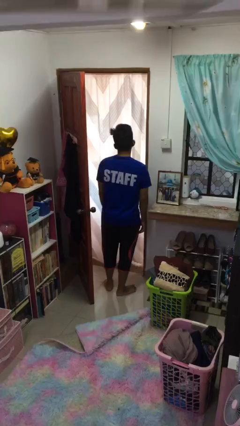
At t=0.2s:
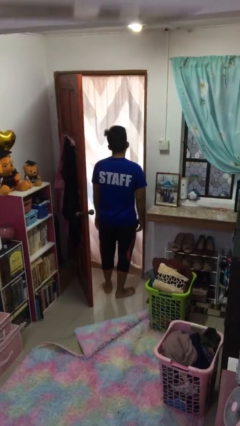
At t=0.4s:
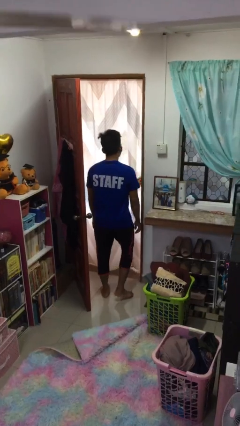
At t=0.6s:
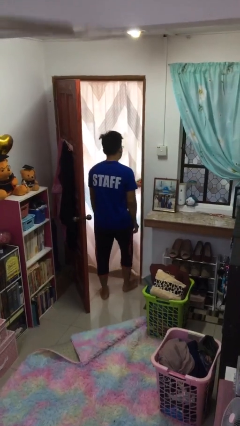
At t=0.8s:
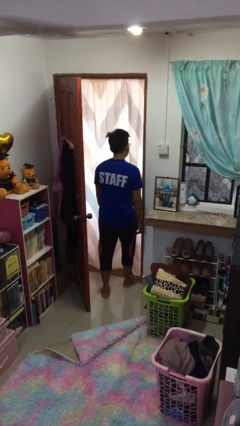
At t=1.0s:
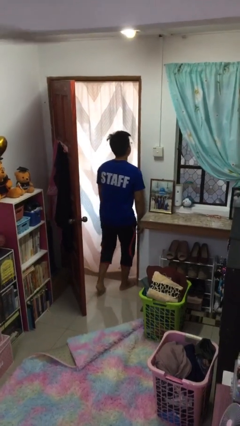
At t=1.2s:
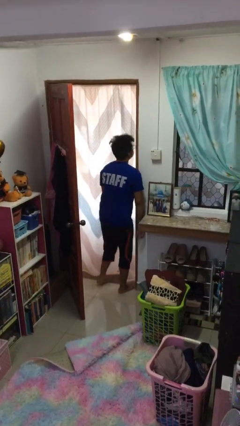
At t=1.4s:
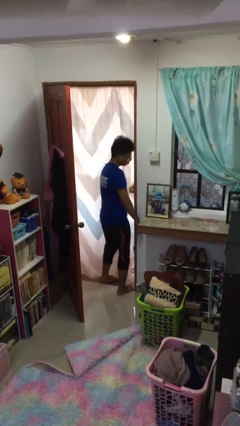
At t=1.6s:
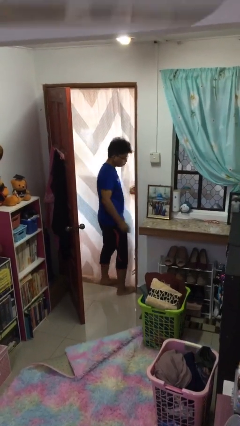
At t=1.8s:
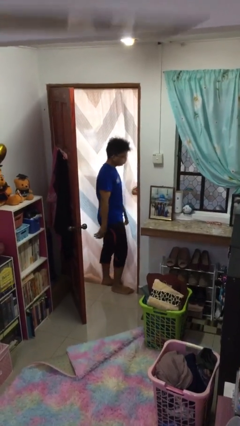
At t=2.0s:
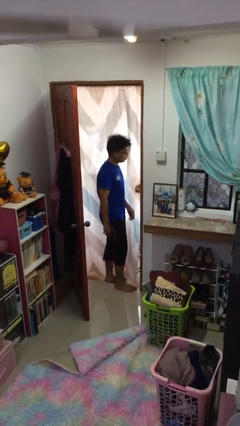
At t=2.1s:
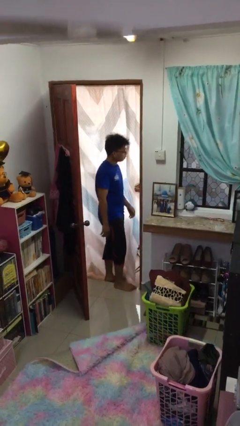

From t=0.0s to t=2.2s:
person bumps into wall

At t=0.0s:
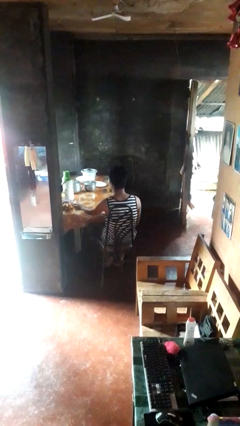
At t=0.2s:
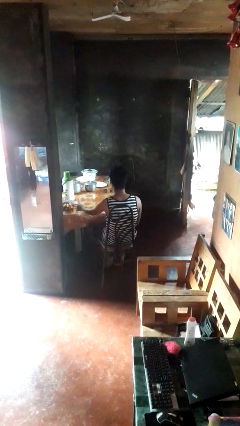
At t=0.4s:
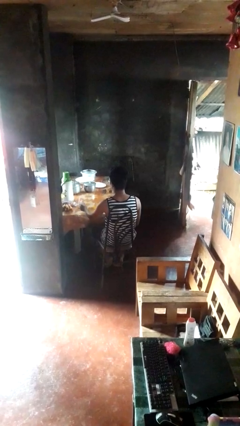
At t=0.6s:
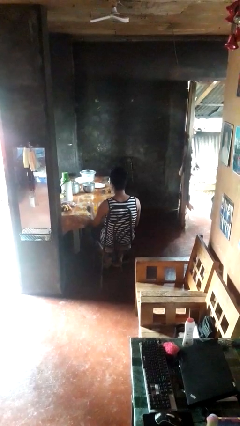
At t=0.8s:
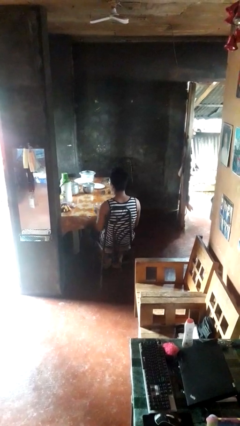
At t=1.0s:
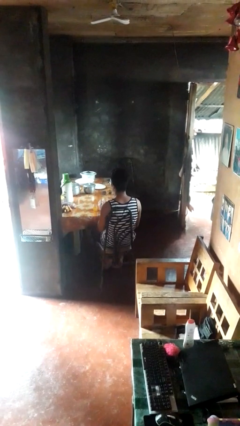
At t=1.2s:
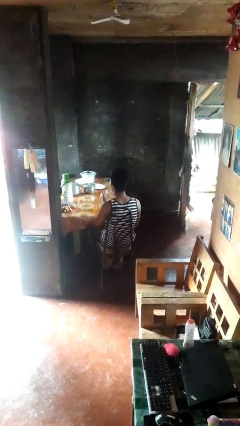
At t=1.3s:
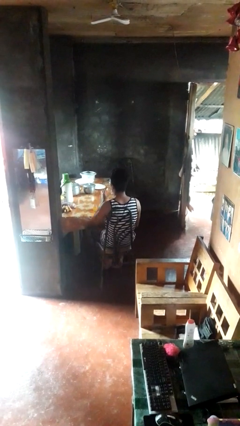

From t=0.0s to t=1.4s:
person picks up object from table

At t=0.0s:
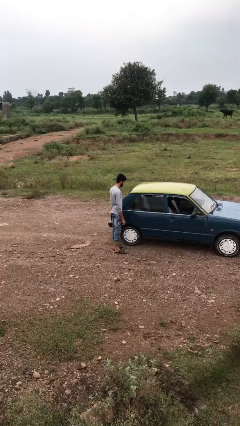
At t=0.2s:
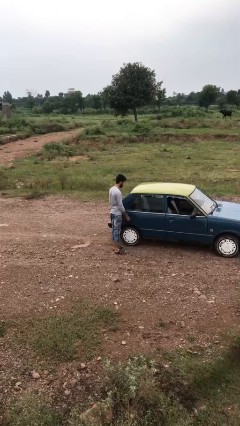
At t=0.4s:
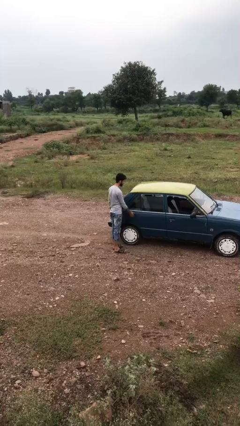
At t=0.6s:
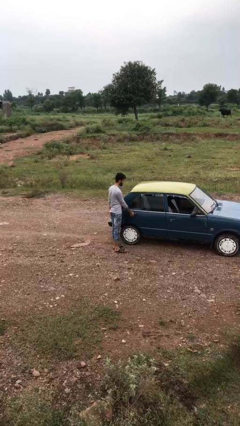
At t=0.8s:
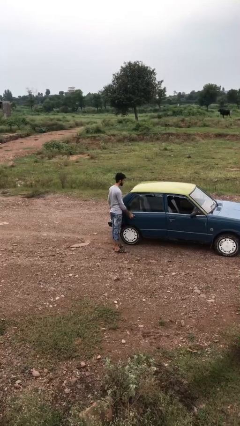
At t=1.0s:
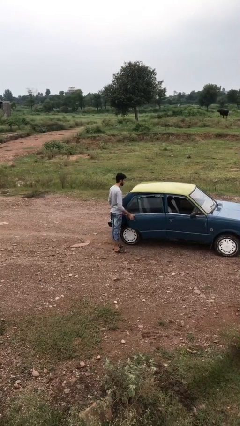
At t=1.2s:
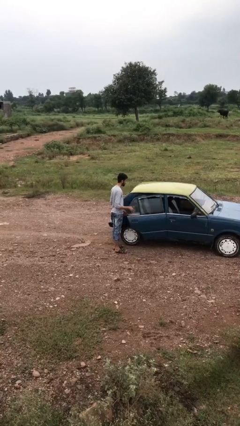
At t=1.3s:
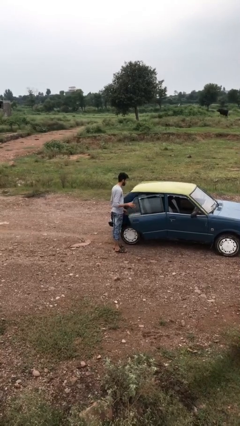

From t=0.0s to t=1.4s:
person opens car door

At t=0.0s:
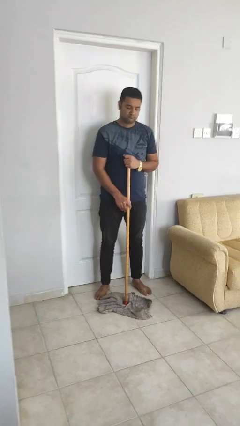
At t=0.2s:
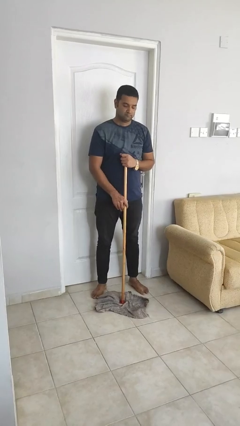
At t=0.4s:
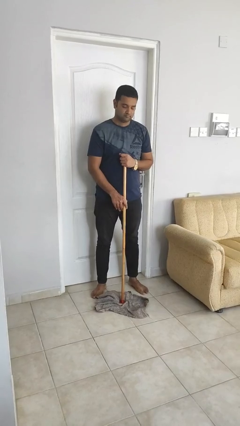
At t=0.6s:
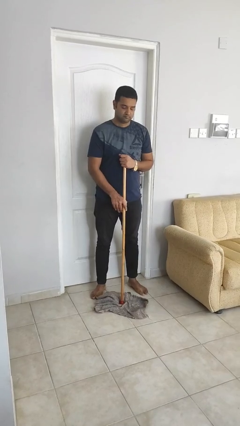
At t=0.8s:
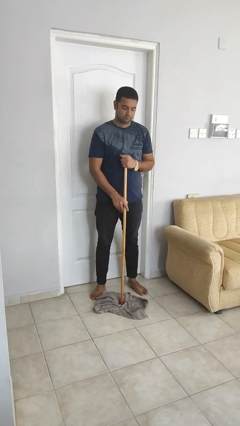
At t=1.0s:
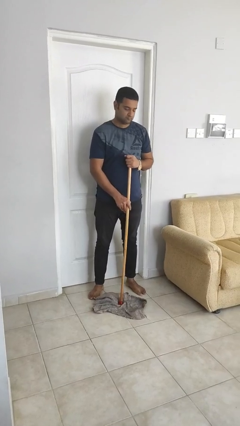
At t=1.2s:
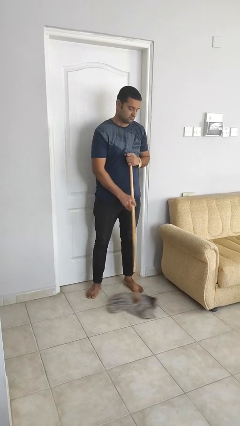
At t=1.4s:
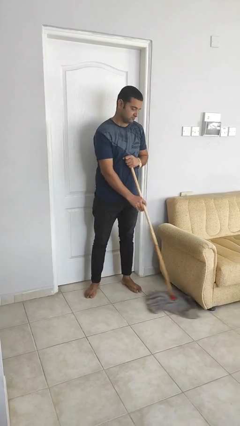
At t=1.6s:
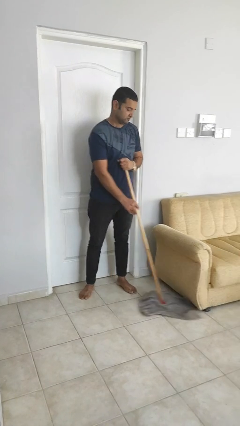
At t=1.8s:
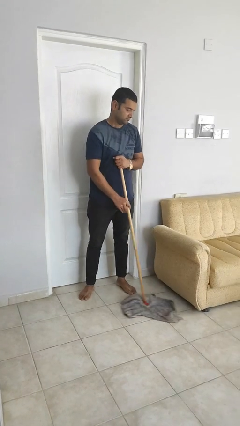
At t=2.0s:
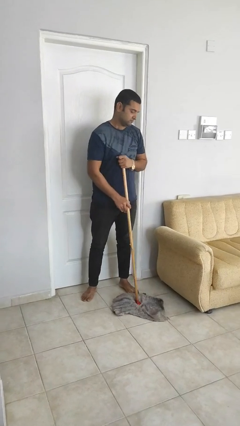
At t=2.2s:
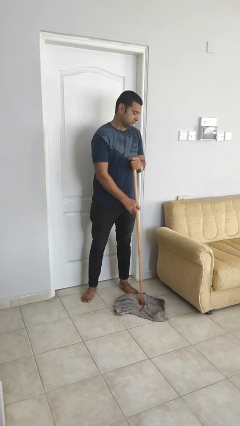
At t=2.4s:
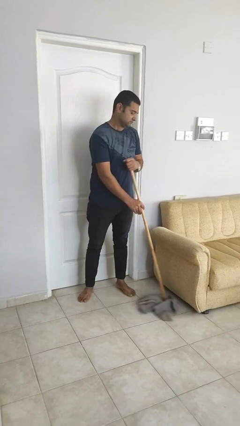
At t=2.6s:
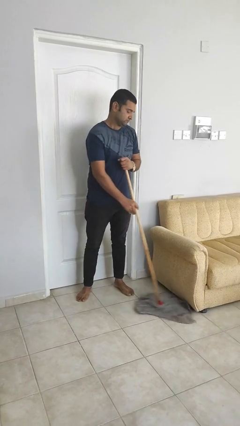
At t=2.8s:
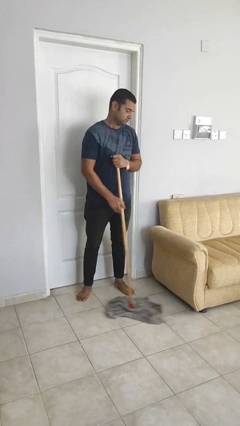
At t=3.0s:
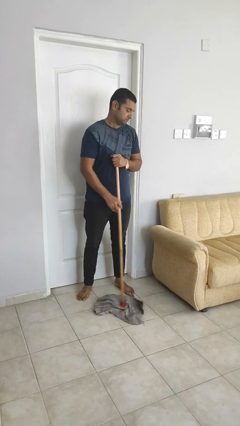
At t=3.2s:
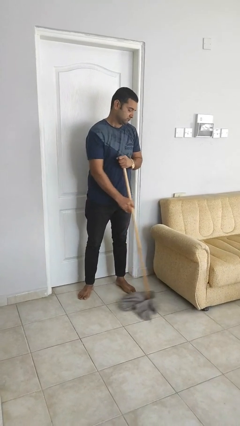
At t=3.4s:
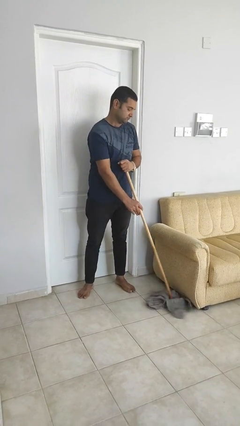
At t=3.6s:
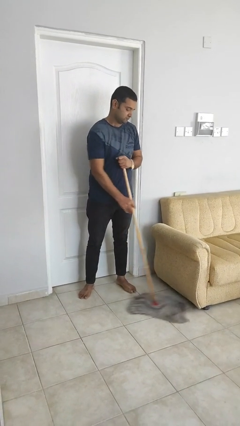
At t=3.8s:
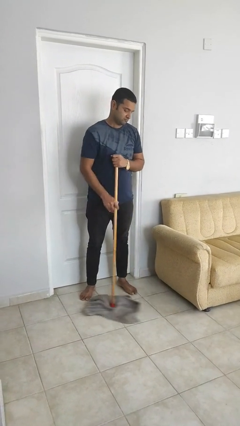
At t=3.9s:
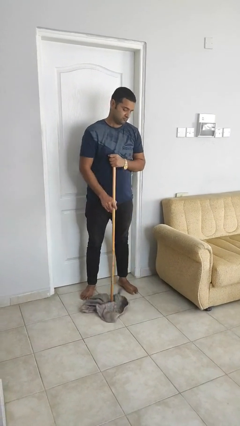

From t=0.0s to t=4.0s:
person mops

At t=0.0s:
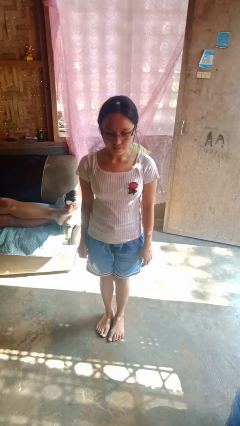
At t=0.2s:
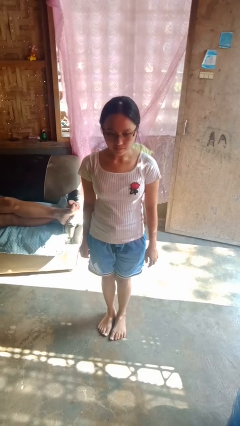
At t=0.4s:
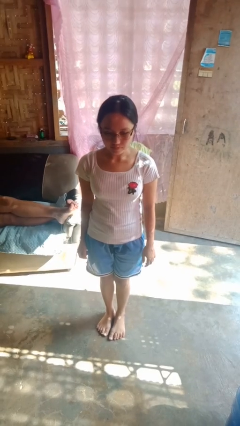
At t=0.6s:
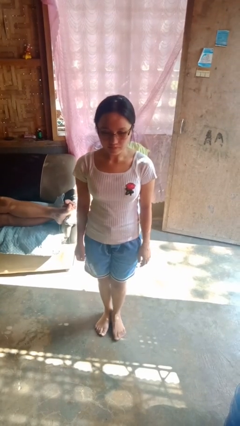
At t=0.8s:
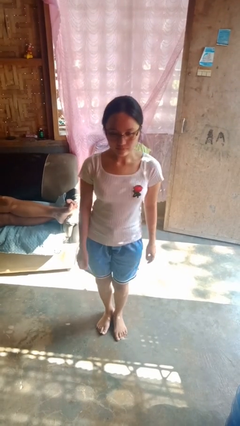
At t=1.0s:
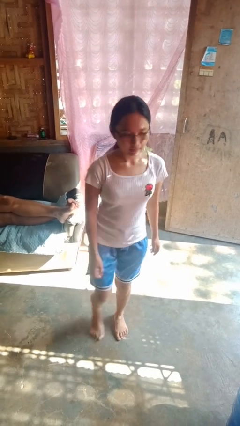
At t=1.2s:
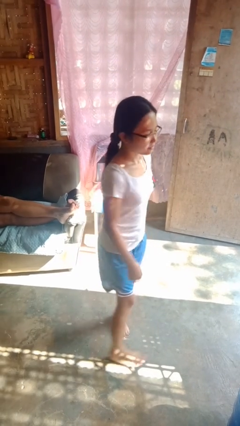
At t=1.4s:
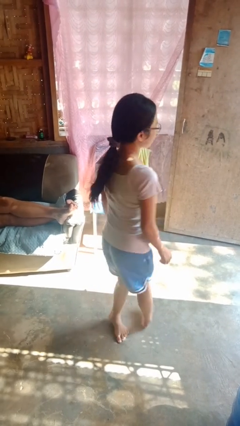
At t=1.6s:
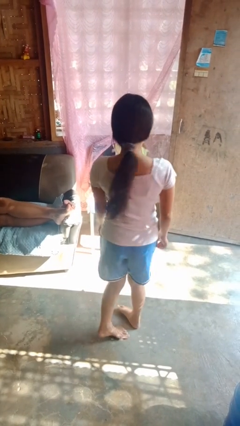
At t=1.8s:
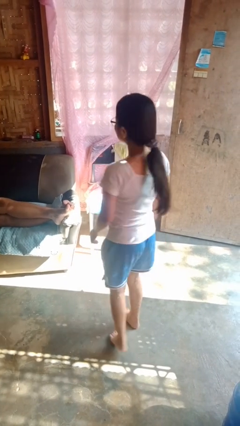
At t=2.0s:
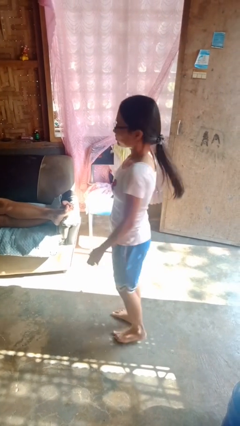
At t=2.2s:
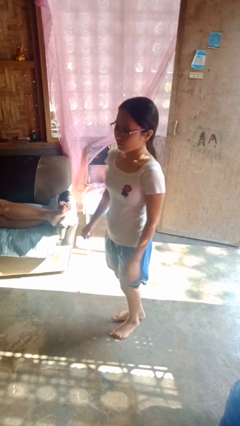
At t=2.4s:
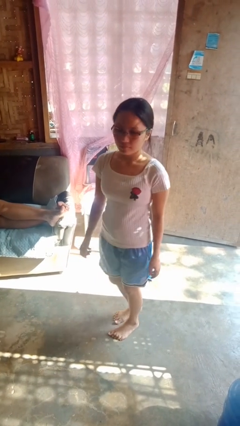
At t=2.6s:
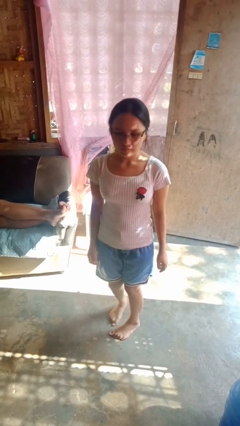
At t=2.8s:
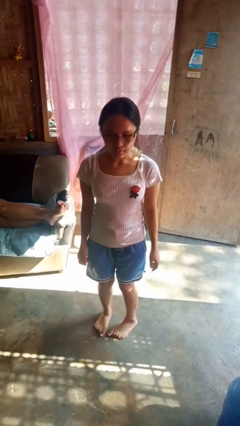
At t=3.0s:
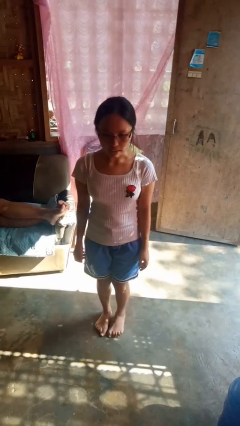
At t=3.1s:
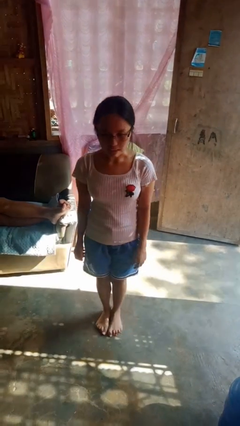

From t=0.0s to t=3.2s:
person twirls

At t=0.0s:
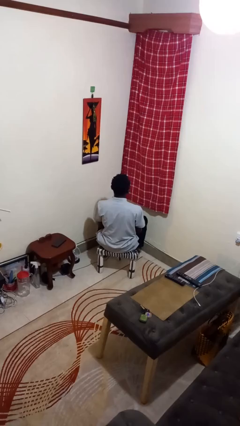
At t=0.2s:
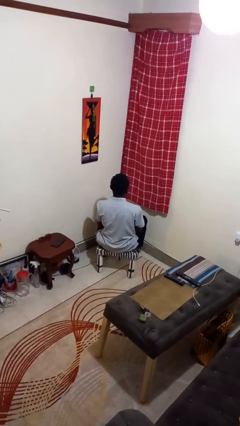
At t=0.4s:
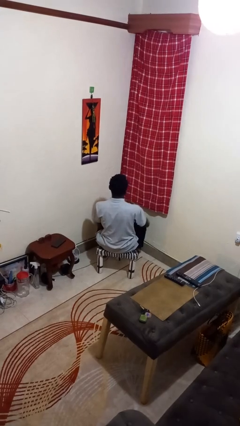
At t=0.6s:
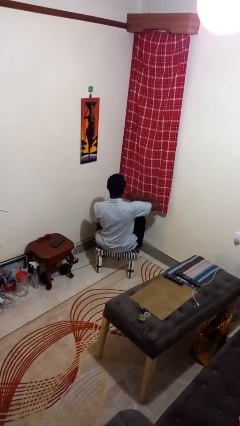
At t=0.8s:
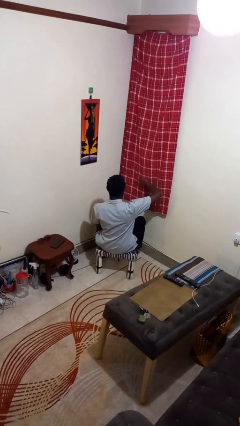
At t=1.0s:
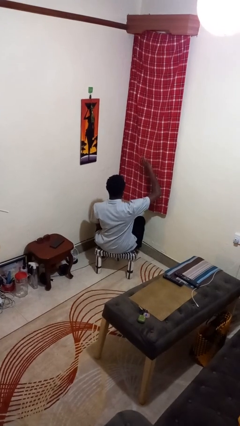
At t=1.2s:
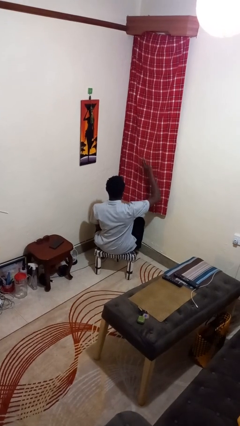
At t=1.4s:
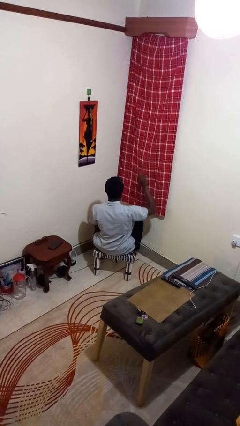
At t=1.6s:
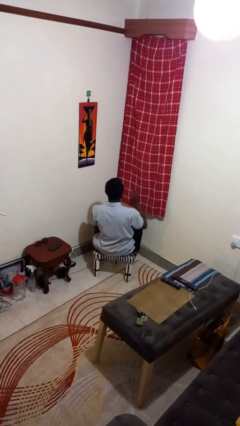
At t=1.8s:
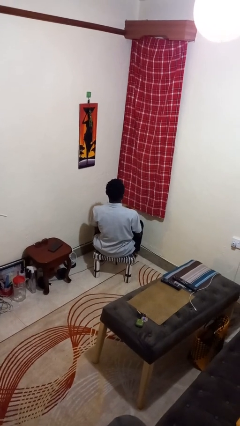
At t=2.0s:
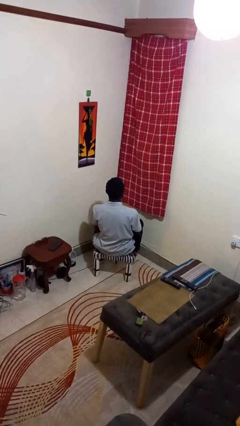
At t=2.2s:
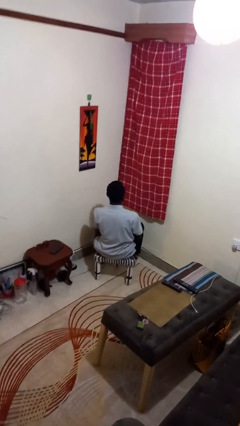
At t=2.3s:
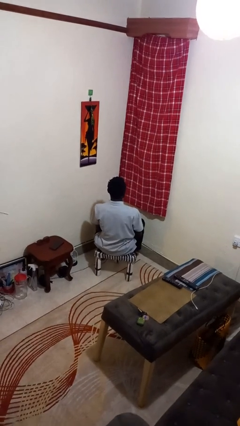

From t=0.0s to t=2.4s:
person gestures swipe up

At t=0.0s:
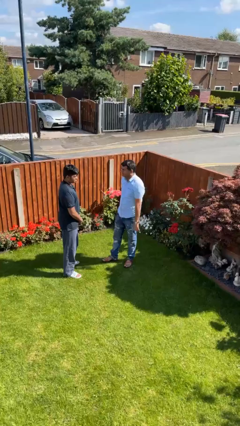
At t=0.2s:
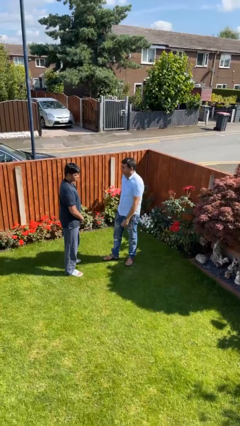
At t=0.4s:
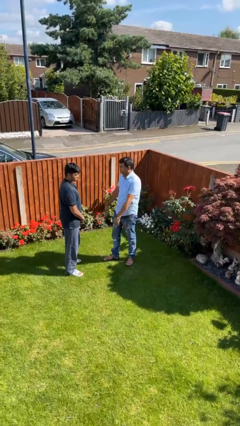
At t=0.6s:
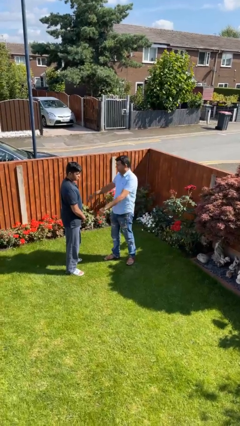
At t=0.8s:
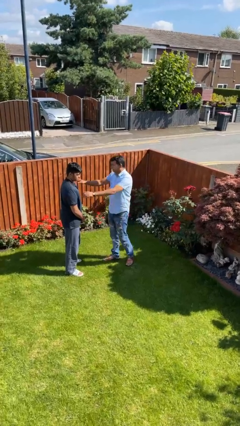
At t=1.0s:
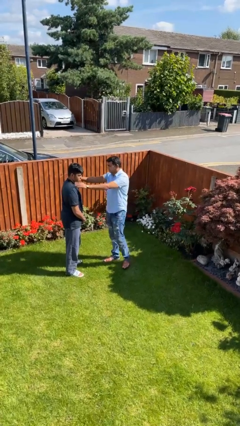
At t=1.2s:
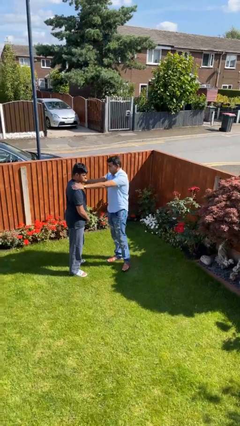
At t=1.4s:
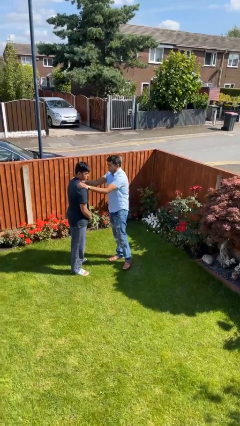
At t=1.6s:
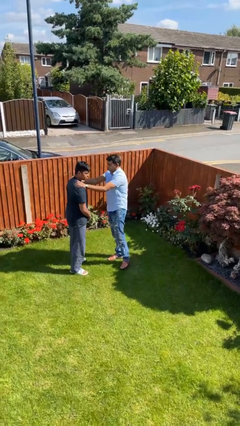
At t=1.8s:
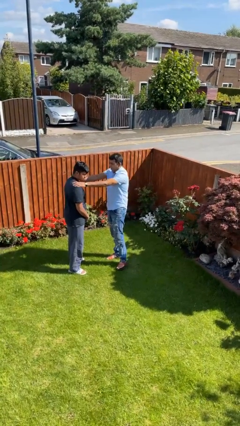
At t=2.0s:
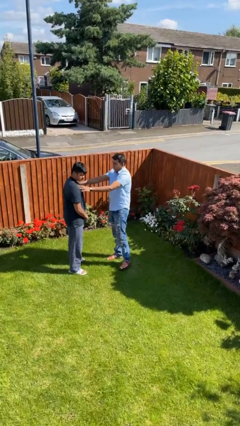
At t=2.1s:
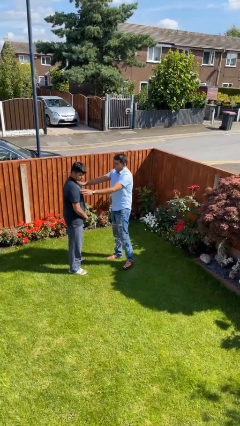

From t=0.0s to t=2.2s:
person pounds shoulders of person

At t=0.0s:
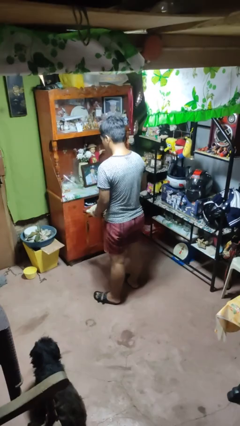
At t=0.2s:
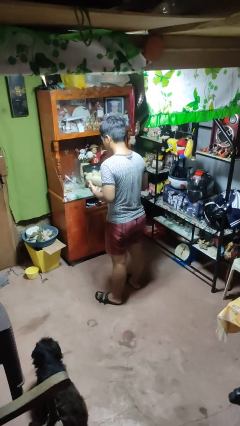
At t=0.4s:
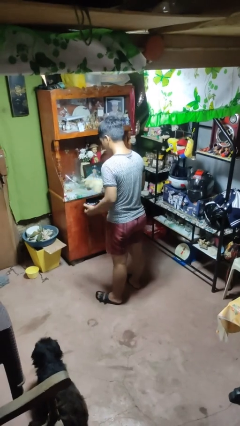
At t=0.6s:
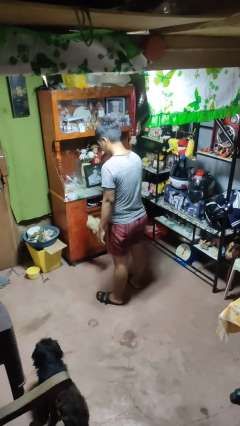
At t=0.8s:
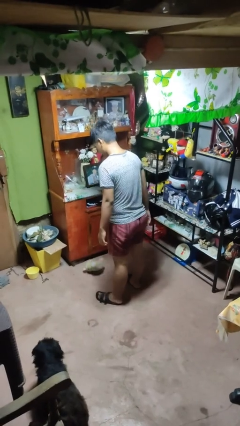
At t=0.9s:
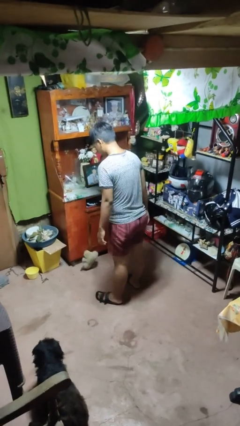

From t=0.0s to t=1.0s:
person drops object
